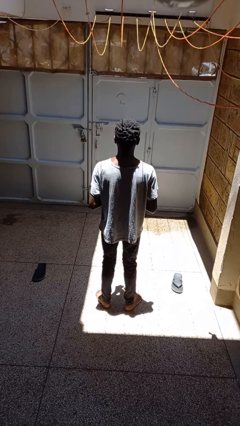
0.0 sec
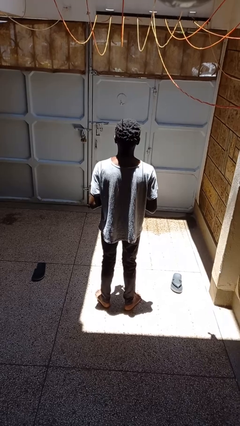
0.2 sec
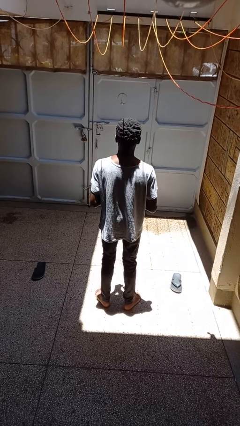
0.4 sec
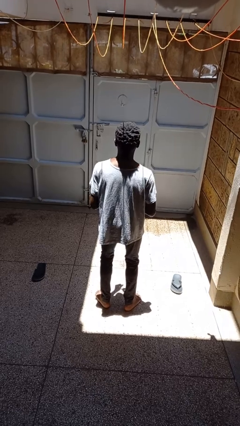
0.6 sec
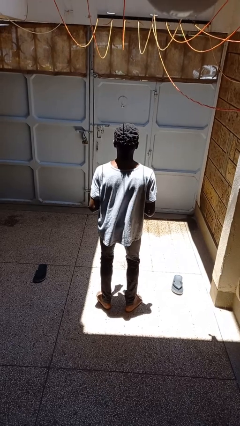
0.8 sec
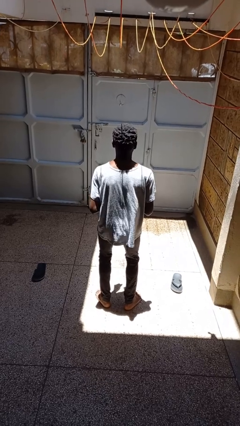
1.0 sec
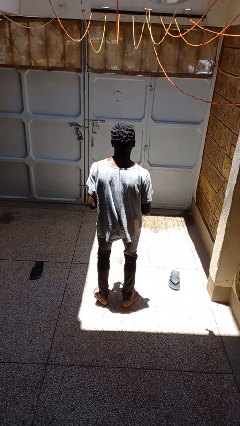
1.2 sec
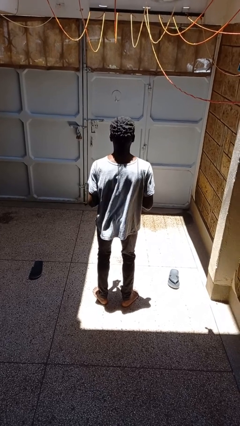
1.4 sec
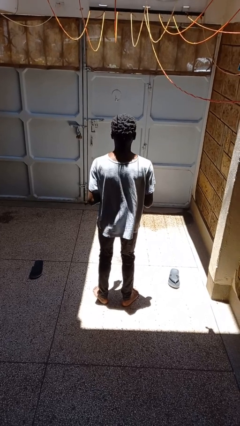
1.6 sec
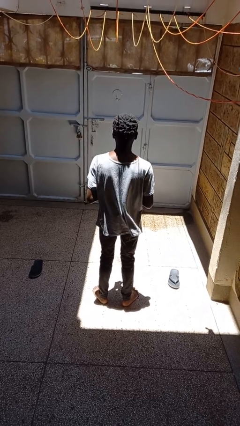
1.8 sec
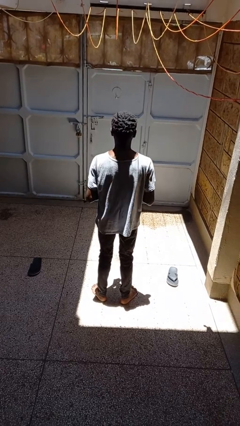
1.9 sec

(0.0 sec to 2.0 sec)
person dances in place

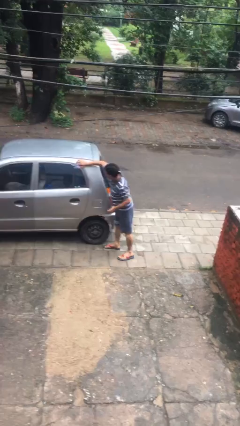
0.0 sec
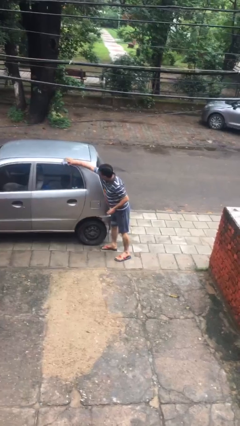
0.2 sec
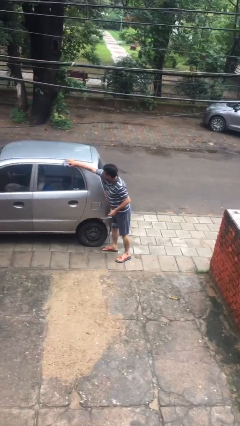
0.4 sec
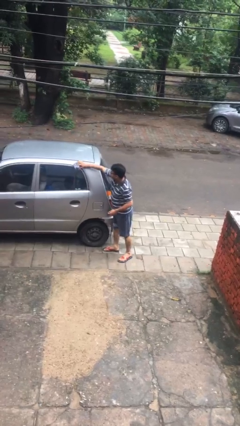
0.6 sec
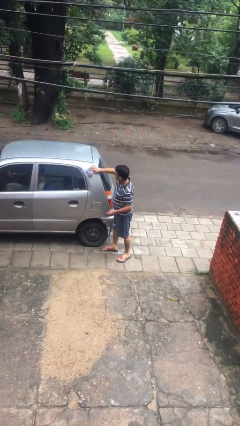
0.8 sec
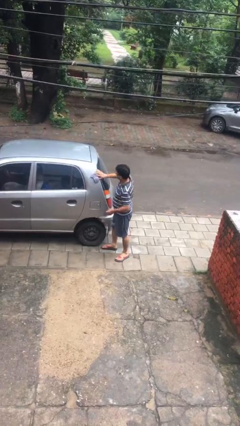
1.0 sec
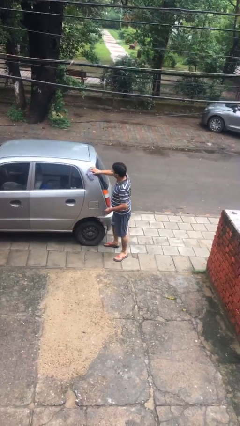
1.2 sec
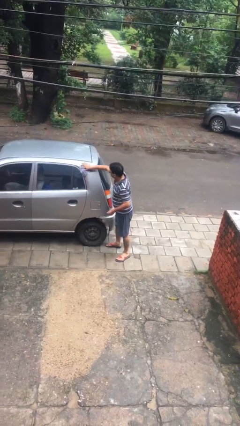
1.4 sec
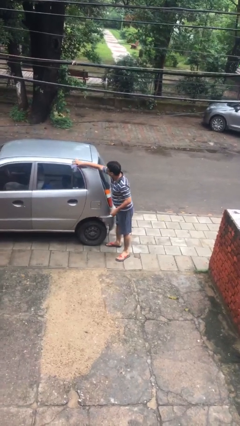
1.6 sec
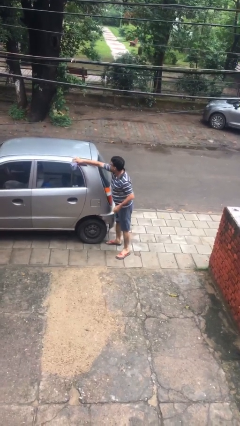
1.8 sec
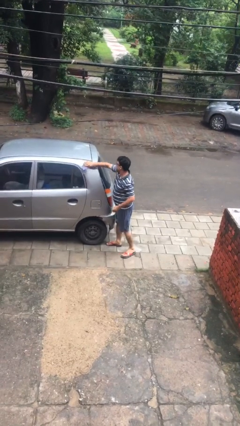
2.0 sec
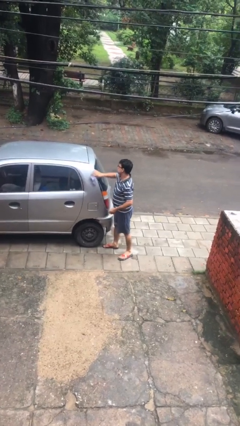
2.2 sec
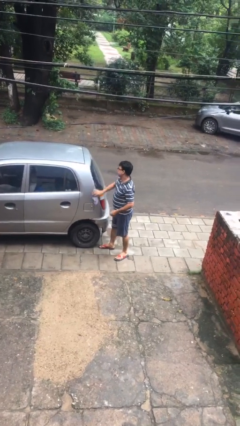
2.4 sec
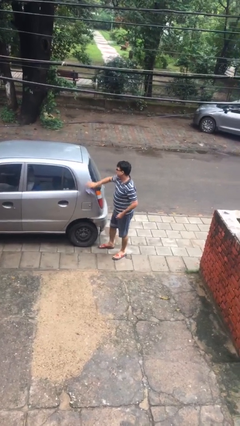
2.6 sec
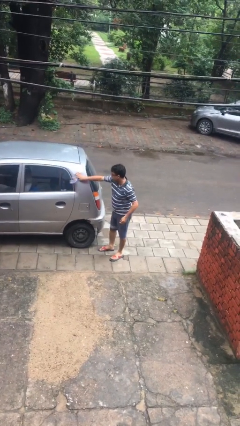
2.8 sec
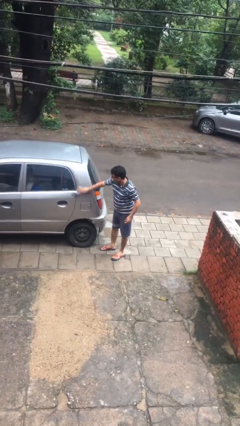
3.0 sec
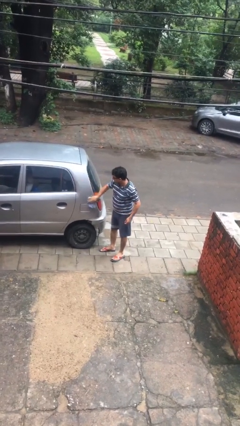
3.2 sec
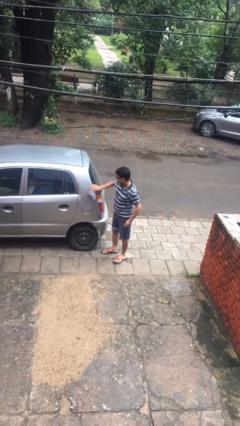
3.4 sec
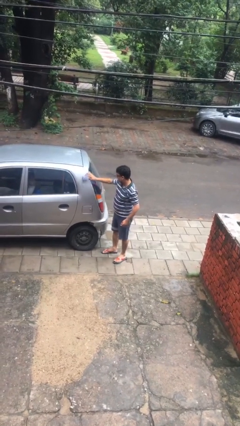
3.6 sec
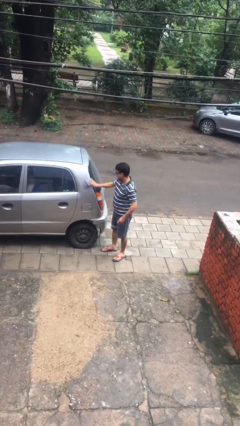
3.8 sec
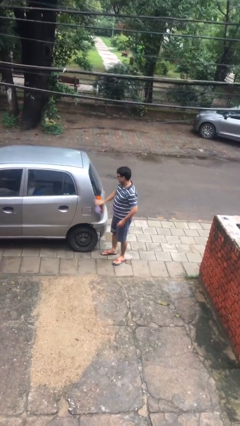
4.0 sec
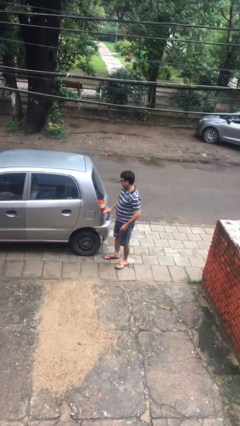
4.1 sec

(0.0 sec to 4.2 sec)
person polishes car with rag

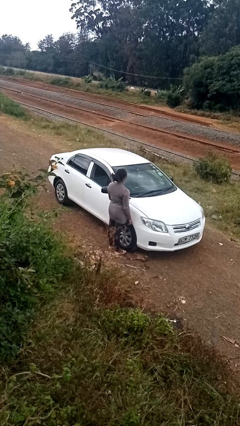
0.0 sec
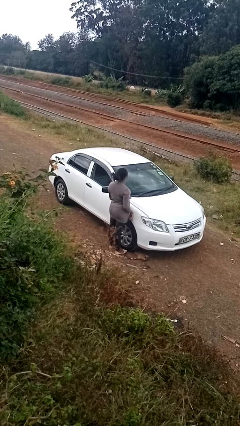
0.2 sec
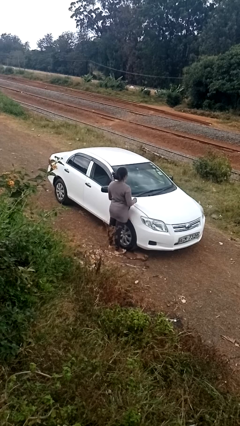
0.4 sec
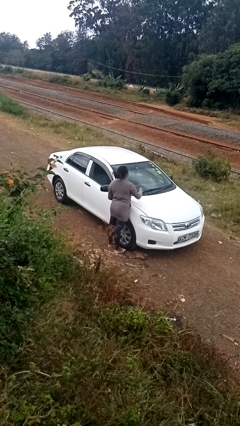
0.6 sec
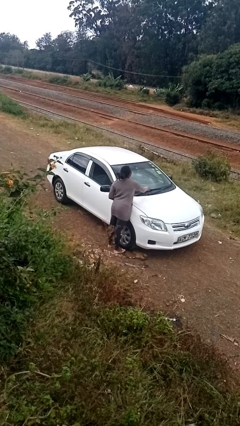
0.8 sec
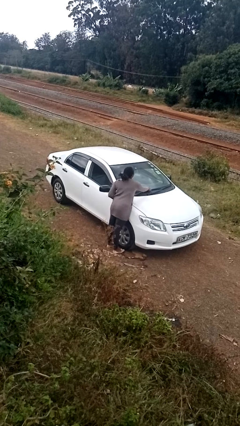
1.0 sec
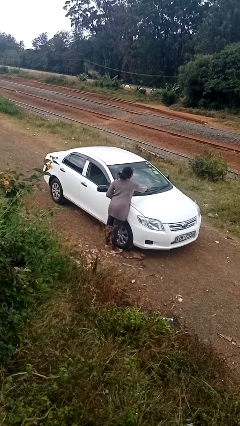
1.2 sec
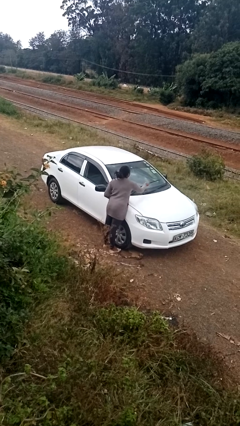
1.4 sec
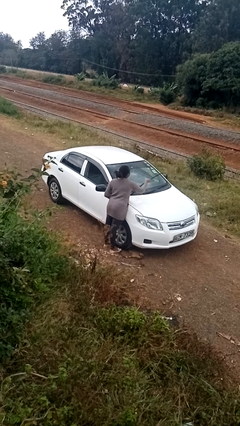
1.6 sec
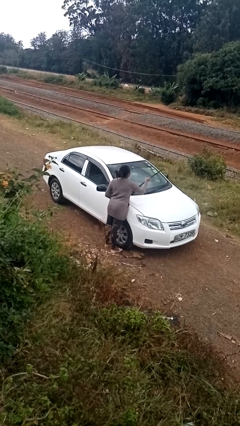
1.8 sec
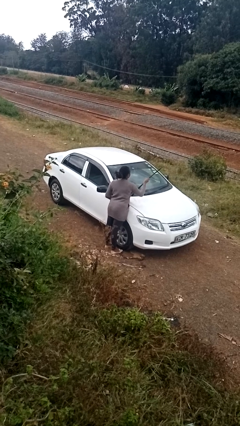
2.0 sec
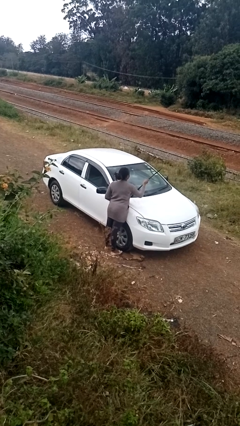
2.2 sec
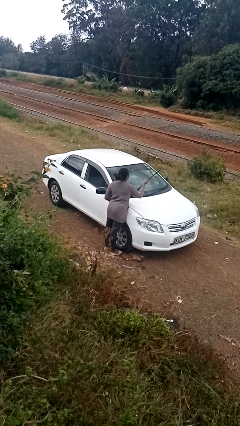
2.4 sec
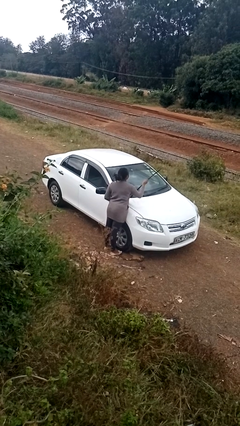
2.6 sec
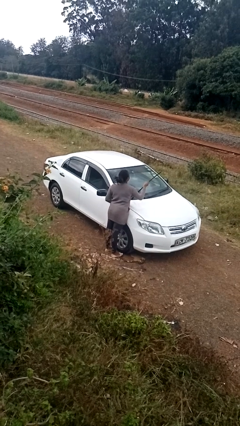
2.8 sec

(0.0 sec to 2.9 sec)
person flips up car wipers

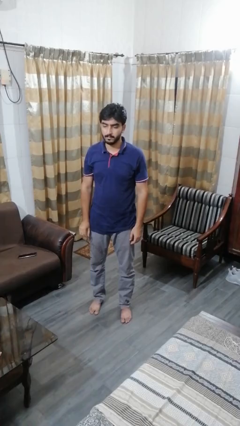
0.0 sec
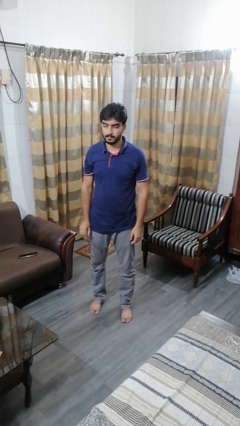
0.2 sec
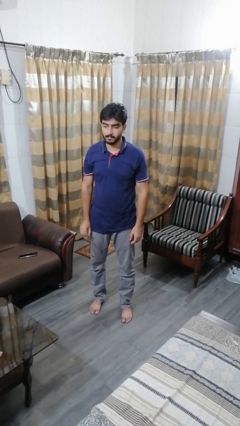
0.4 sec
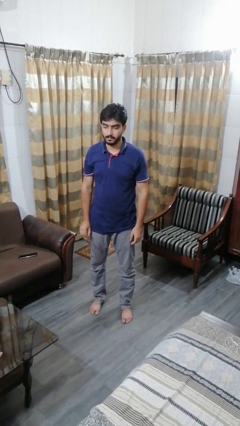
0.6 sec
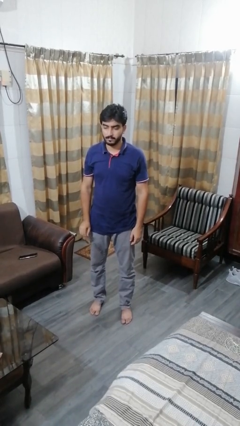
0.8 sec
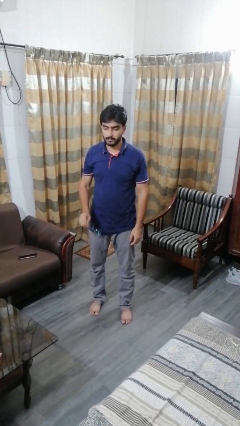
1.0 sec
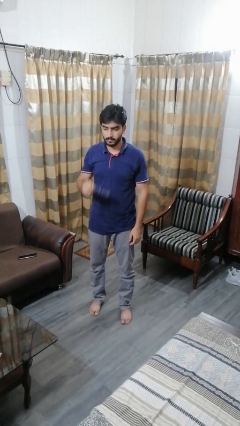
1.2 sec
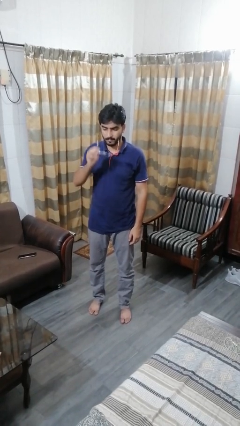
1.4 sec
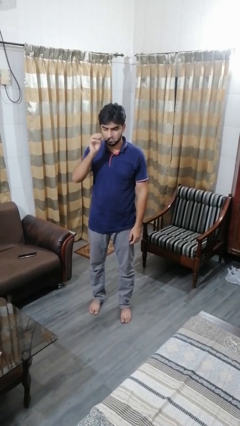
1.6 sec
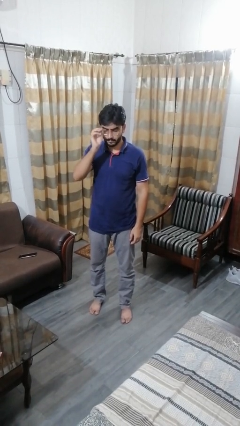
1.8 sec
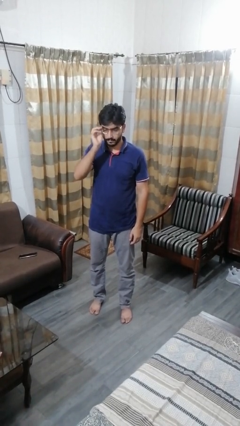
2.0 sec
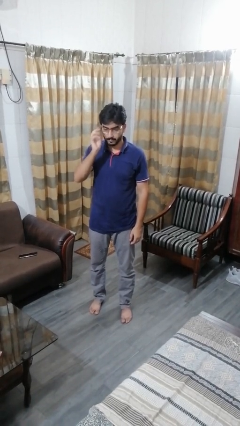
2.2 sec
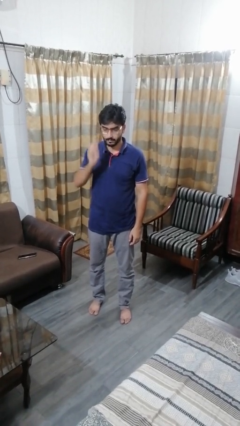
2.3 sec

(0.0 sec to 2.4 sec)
person puts on glasses

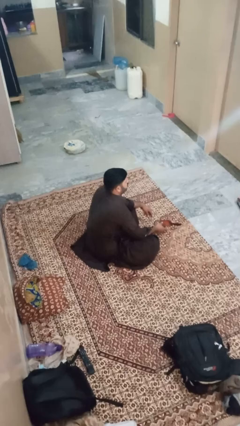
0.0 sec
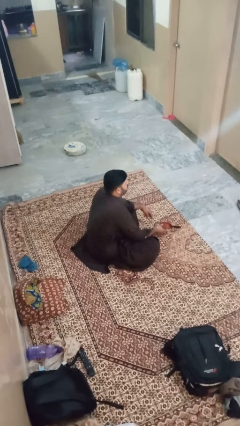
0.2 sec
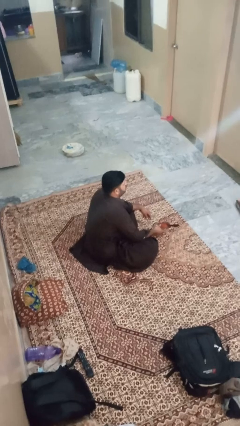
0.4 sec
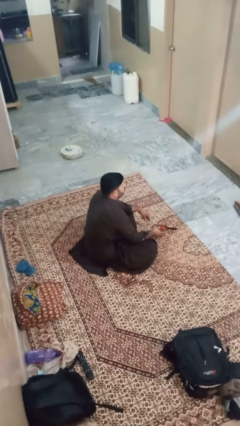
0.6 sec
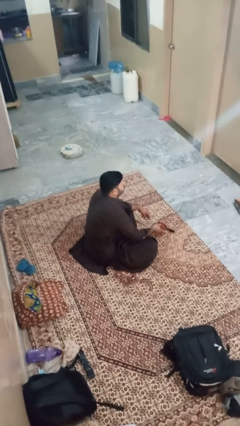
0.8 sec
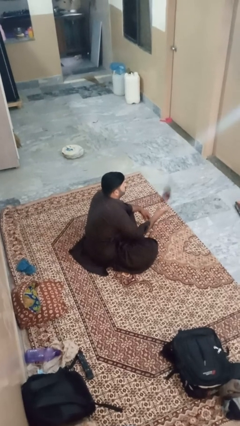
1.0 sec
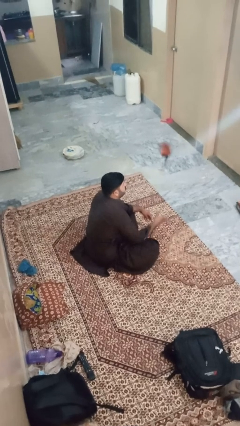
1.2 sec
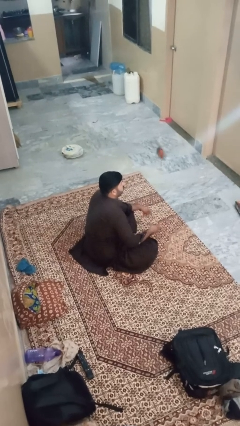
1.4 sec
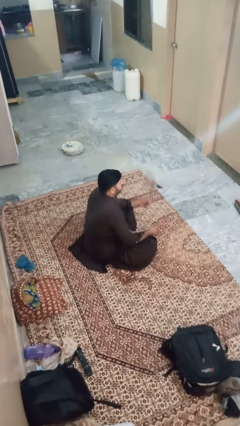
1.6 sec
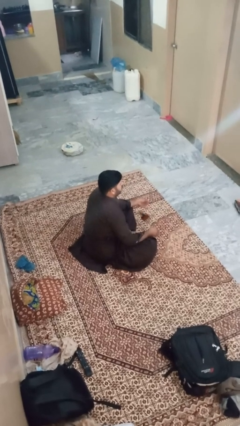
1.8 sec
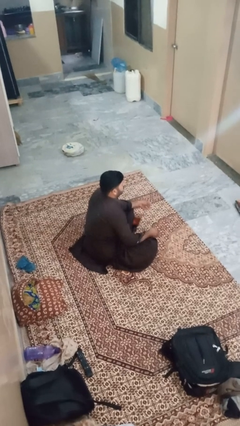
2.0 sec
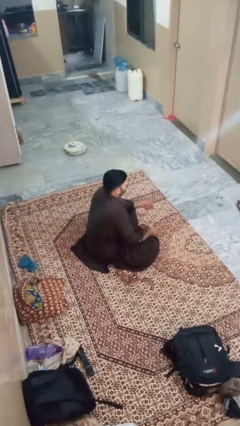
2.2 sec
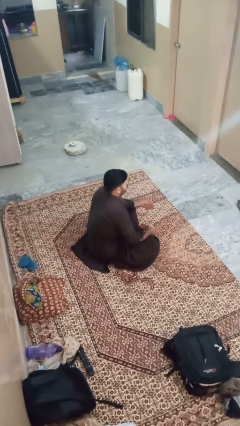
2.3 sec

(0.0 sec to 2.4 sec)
person throws object into air

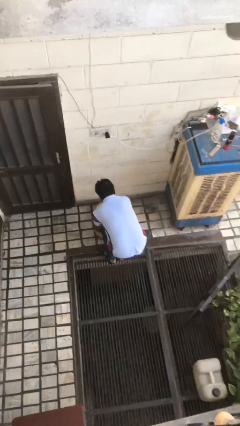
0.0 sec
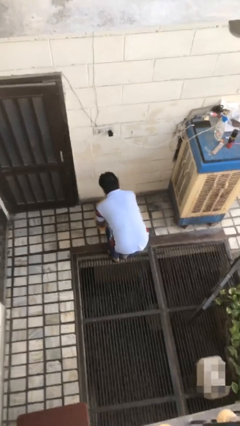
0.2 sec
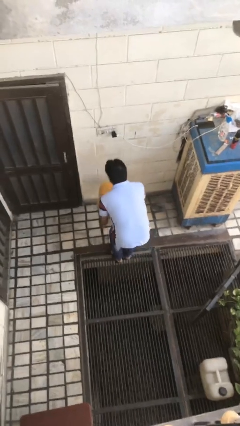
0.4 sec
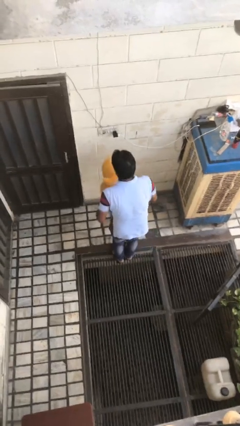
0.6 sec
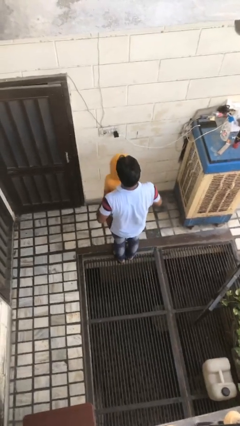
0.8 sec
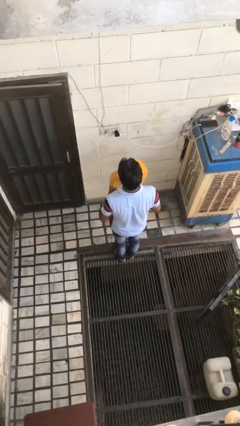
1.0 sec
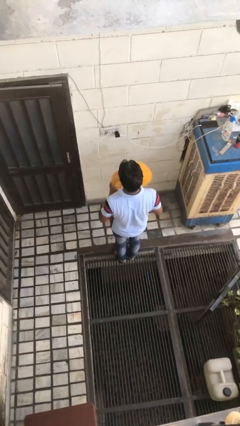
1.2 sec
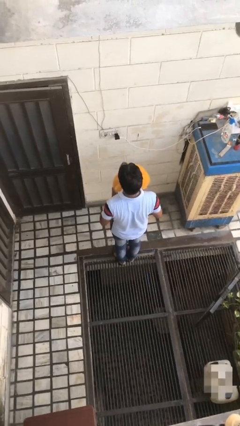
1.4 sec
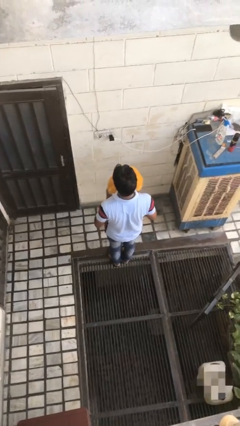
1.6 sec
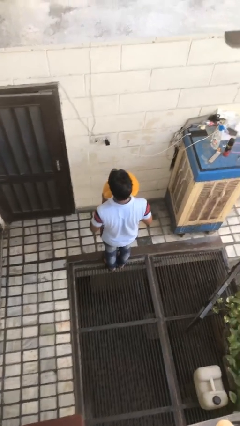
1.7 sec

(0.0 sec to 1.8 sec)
person picks up object from floor

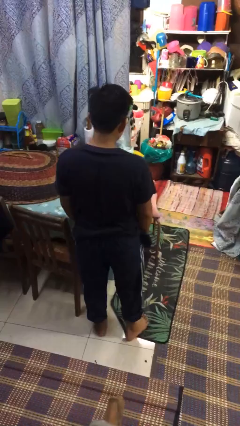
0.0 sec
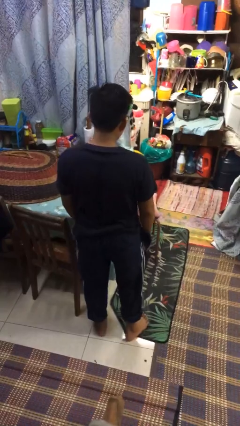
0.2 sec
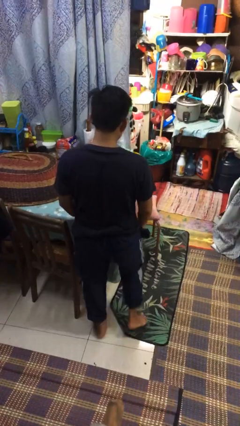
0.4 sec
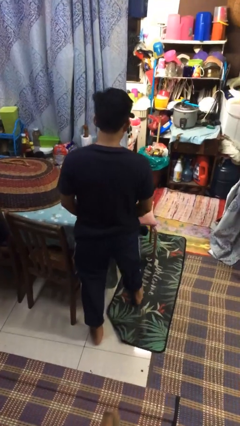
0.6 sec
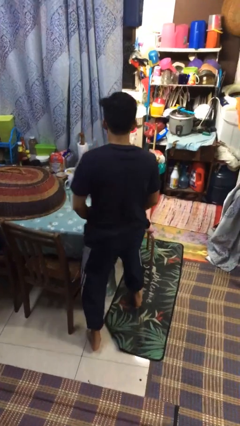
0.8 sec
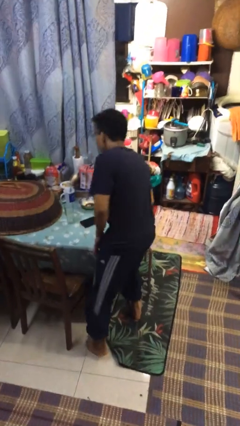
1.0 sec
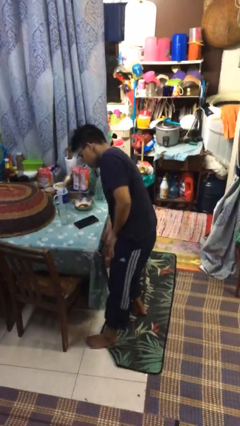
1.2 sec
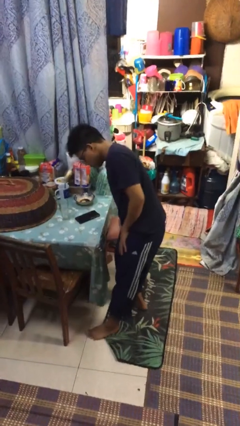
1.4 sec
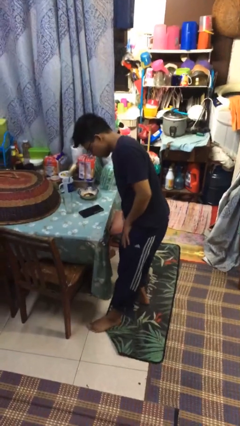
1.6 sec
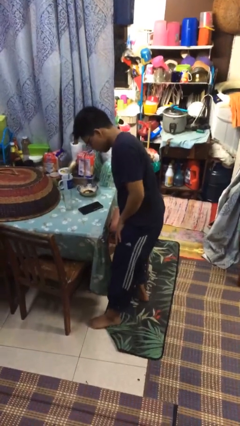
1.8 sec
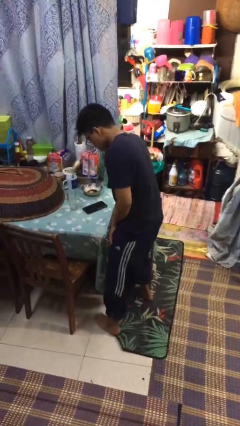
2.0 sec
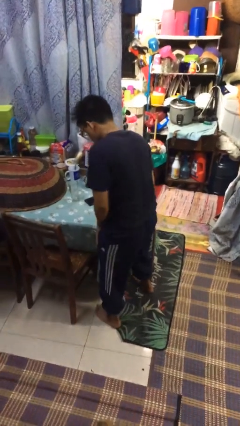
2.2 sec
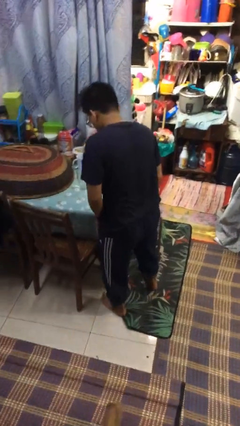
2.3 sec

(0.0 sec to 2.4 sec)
person bumps into table
